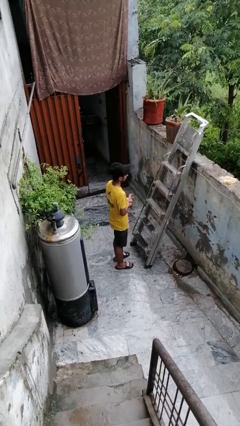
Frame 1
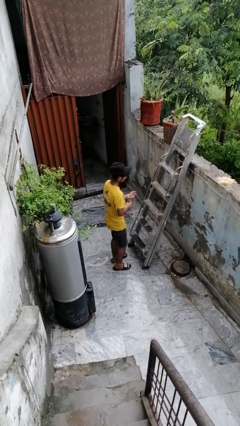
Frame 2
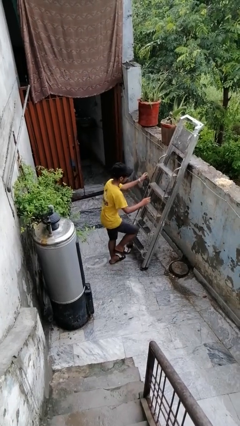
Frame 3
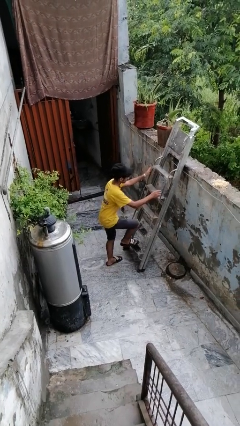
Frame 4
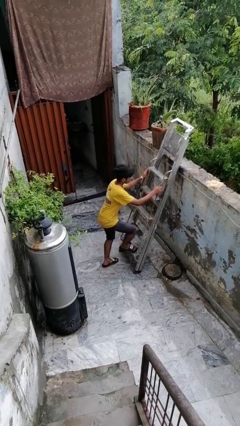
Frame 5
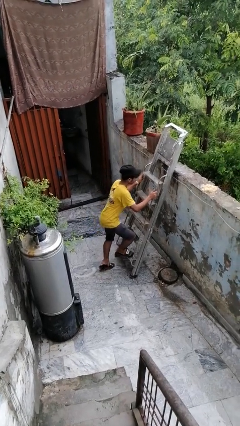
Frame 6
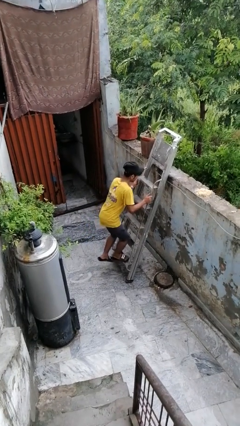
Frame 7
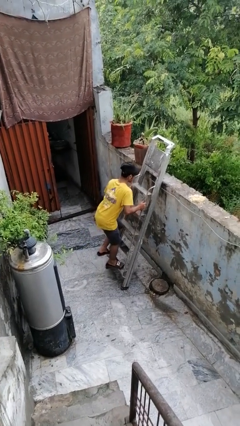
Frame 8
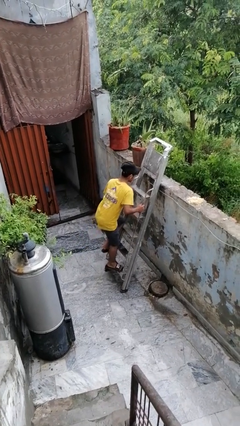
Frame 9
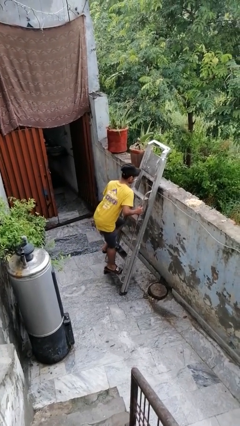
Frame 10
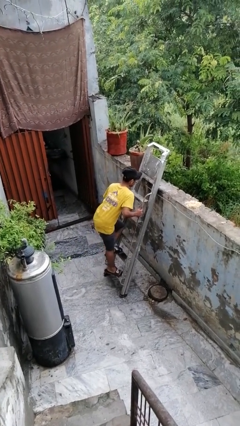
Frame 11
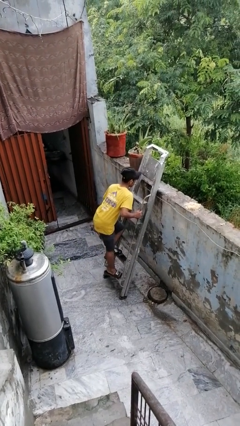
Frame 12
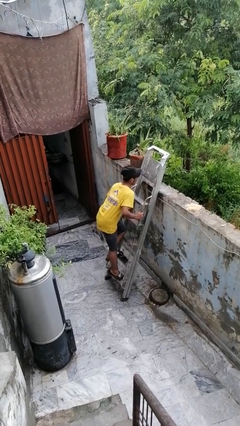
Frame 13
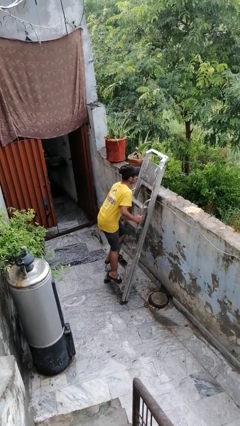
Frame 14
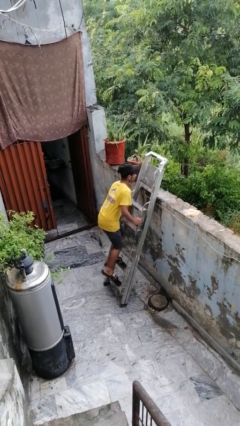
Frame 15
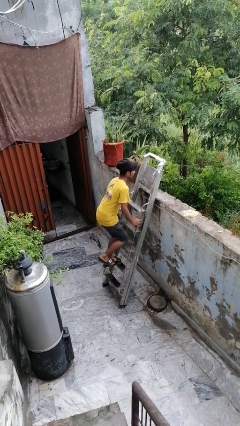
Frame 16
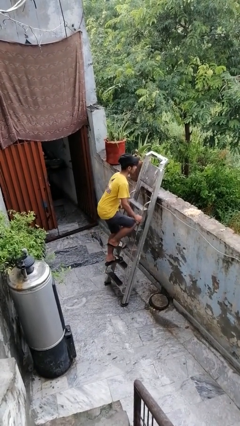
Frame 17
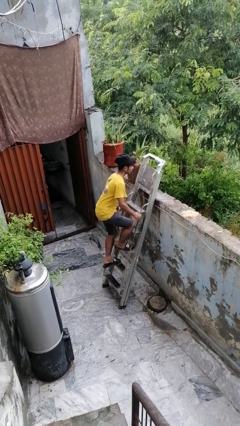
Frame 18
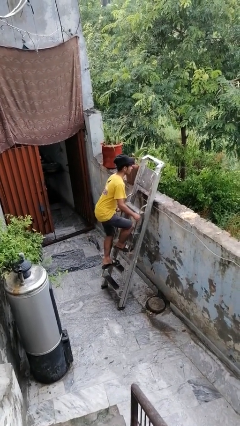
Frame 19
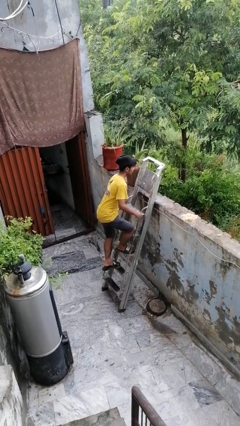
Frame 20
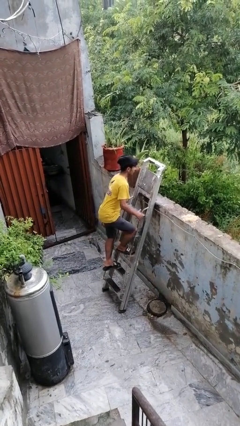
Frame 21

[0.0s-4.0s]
person climbs up ladder

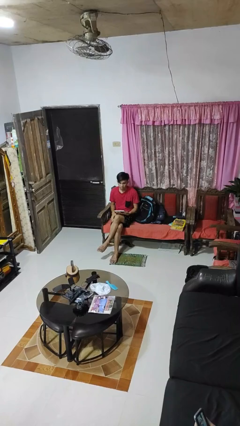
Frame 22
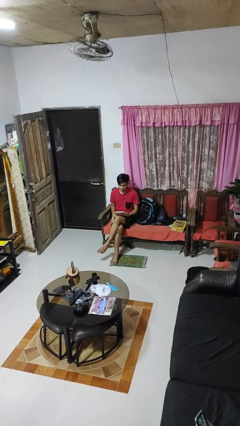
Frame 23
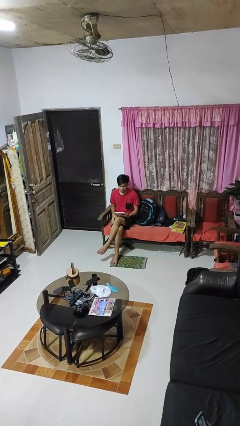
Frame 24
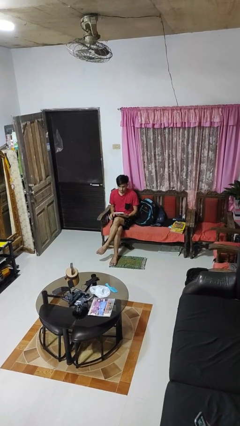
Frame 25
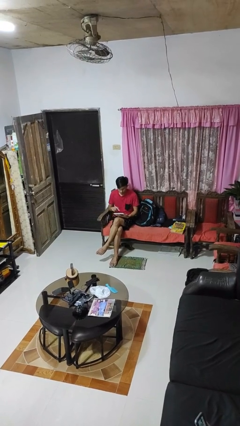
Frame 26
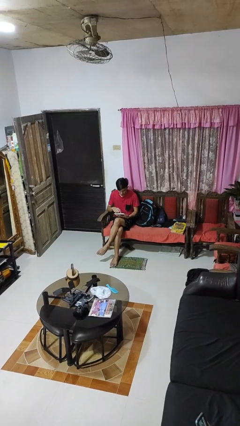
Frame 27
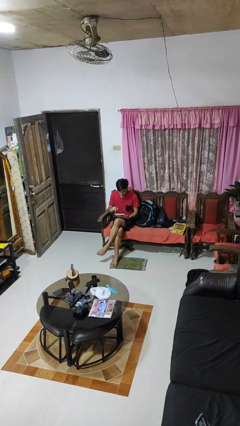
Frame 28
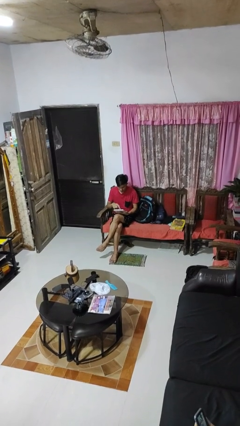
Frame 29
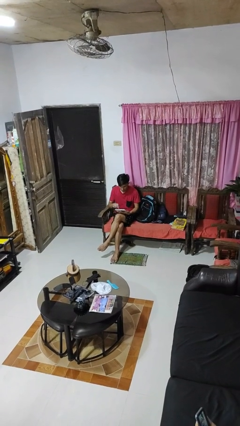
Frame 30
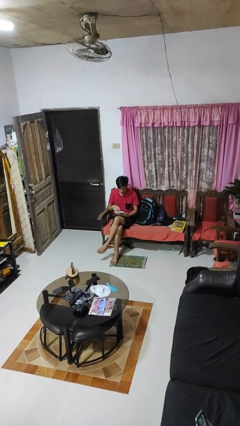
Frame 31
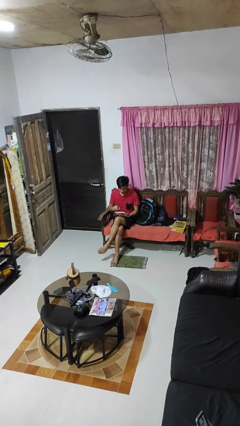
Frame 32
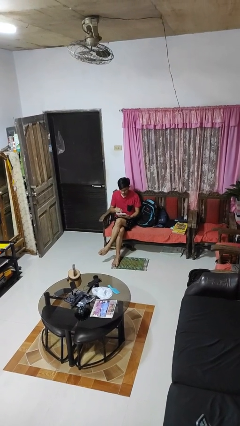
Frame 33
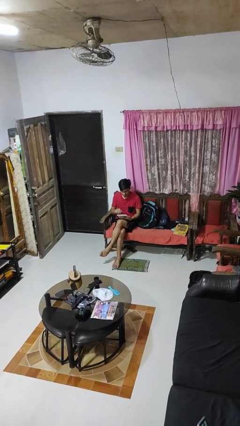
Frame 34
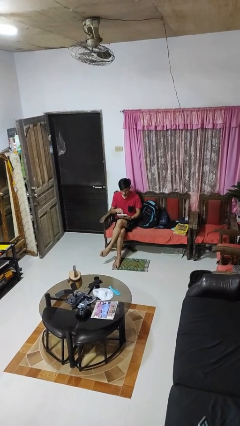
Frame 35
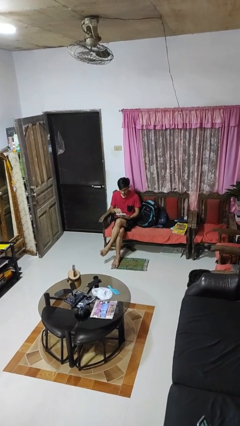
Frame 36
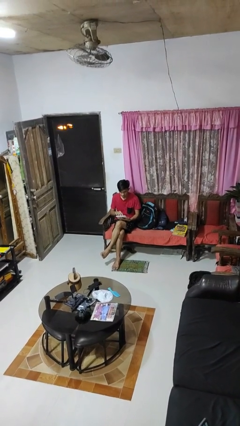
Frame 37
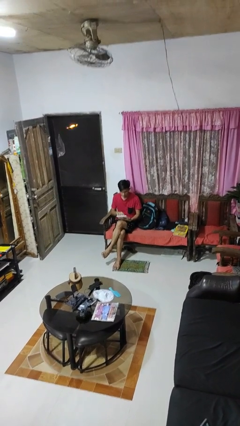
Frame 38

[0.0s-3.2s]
person interacts with tablet

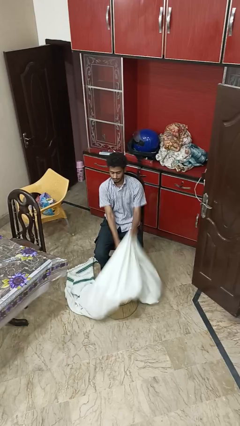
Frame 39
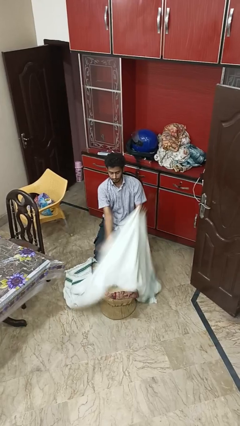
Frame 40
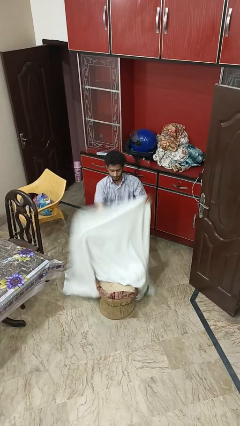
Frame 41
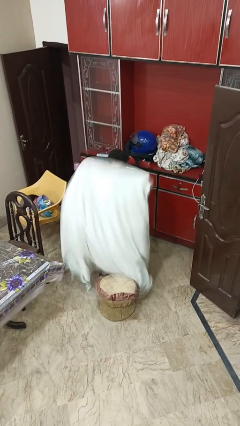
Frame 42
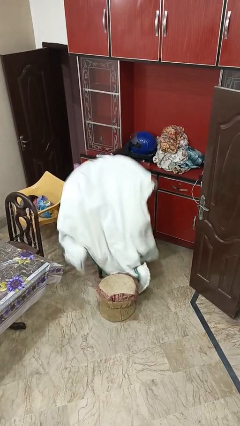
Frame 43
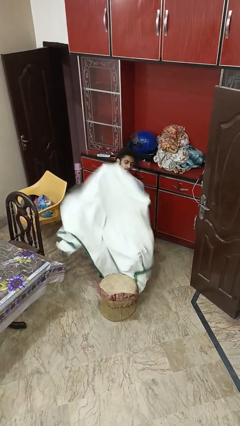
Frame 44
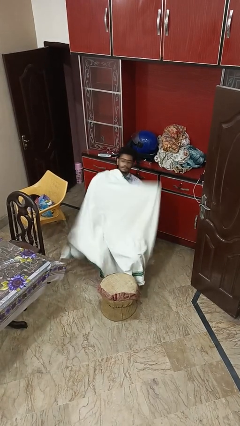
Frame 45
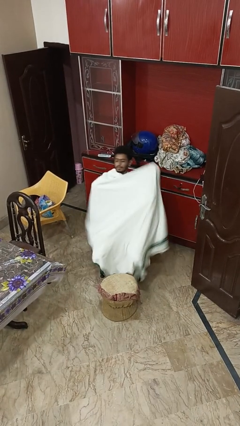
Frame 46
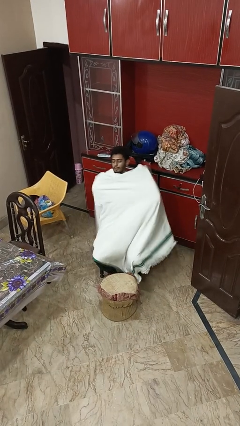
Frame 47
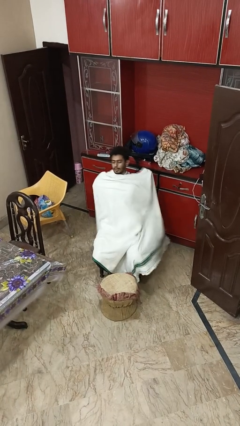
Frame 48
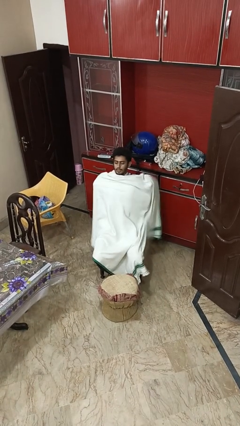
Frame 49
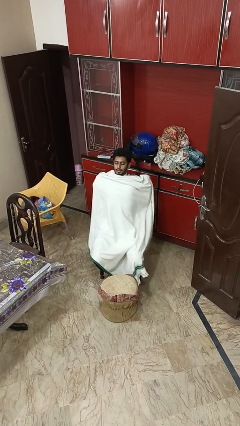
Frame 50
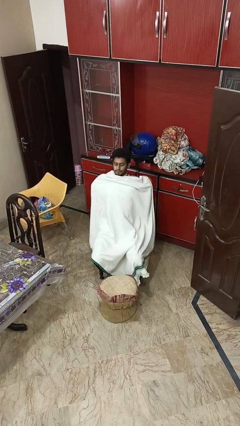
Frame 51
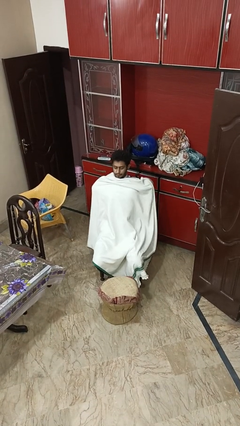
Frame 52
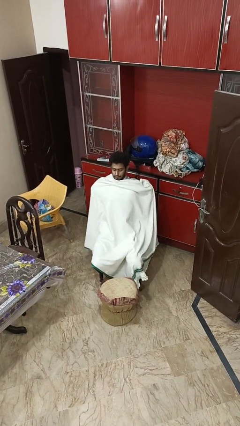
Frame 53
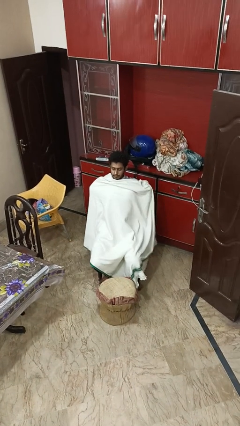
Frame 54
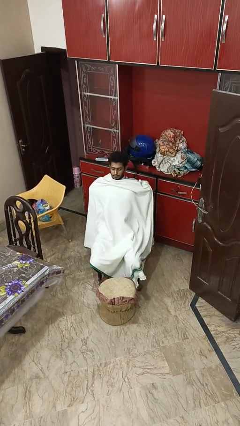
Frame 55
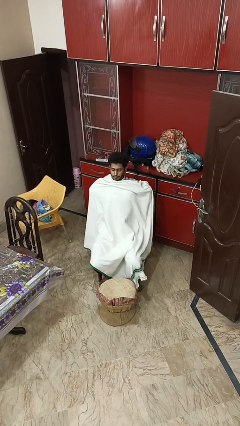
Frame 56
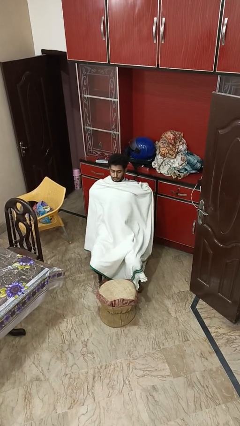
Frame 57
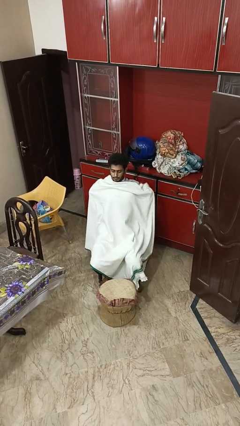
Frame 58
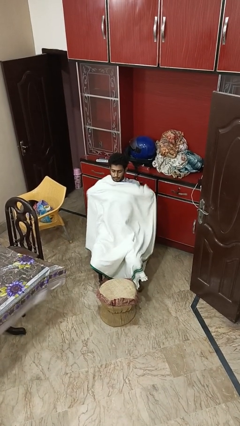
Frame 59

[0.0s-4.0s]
person covers with blanket

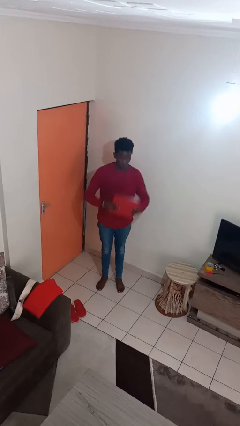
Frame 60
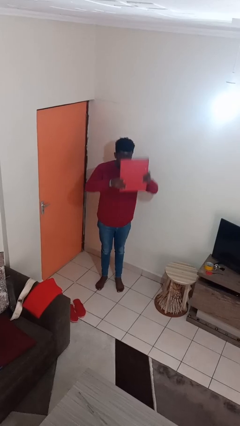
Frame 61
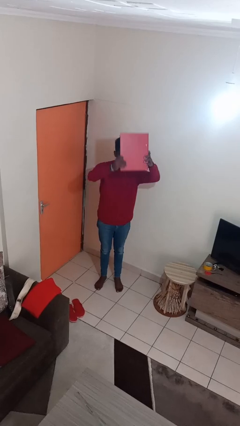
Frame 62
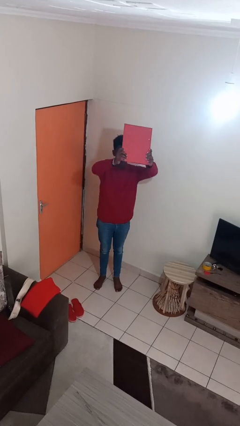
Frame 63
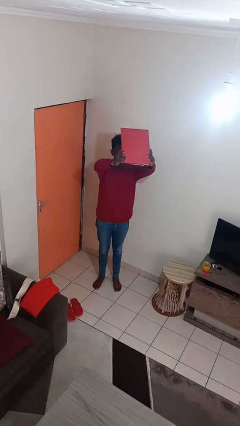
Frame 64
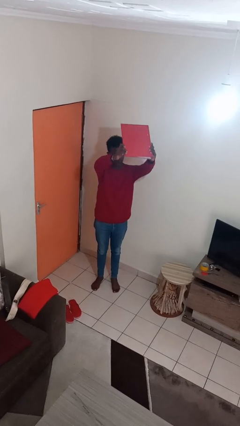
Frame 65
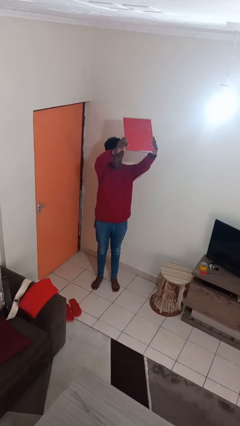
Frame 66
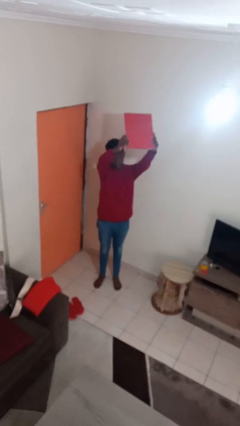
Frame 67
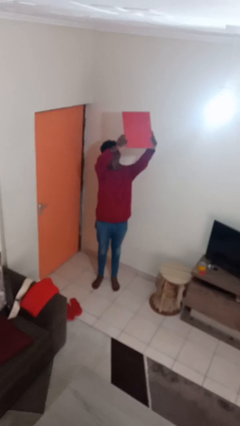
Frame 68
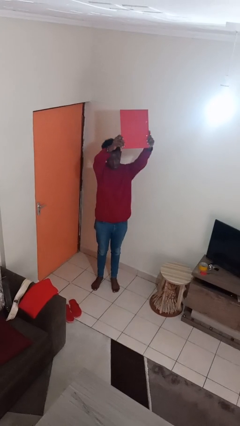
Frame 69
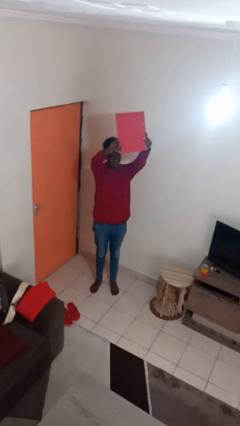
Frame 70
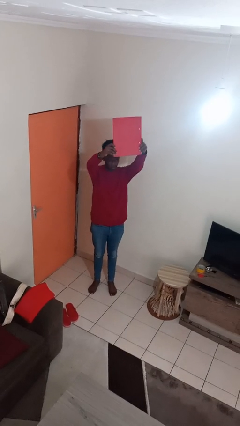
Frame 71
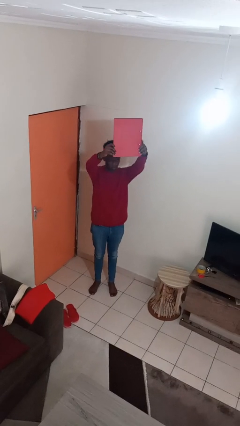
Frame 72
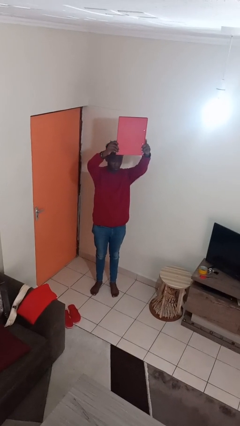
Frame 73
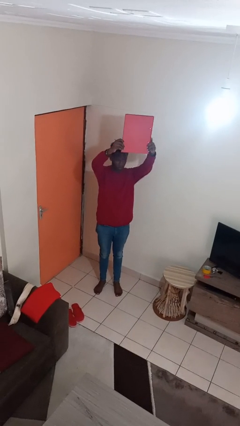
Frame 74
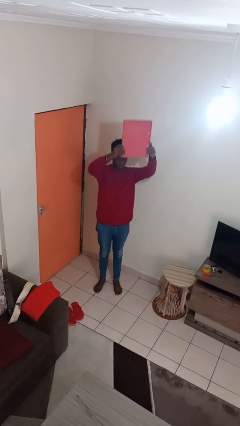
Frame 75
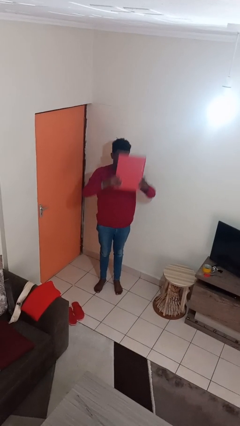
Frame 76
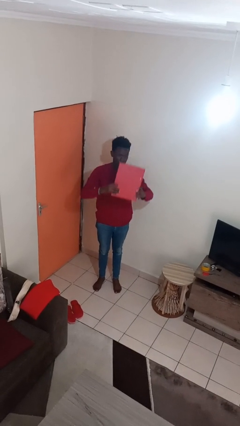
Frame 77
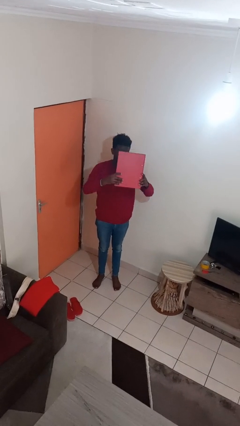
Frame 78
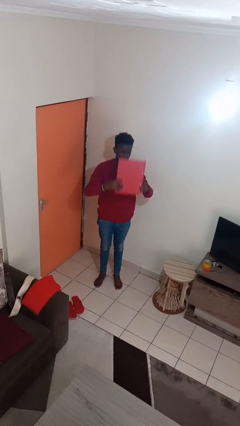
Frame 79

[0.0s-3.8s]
person holds object above head

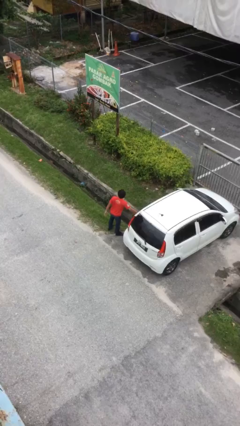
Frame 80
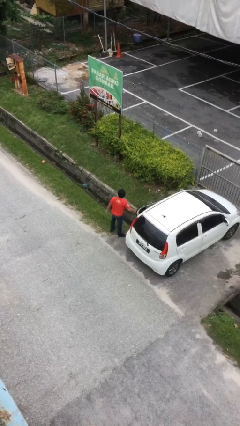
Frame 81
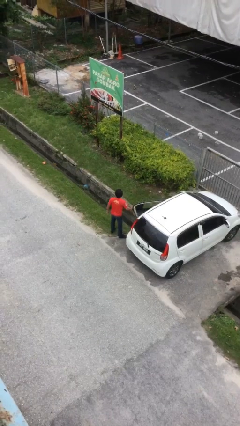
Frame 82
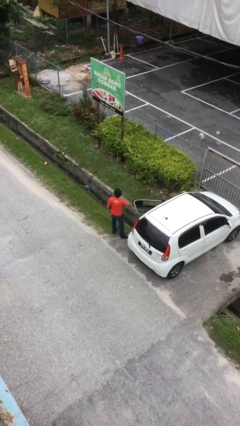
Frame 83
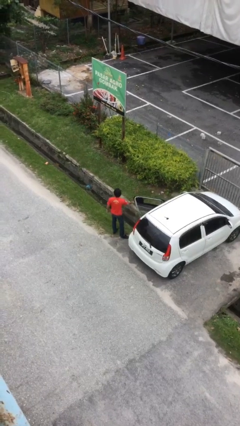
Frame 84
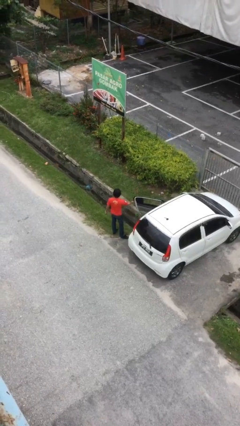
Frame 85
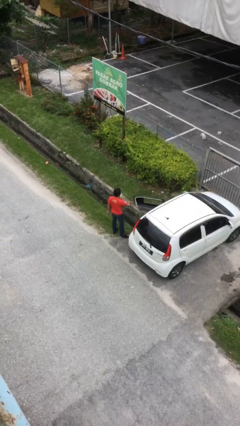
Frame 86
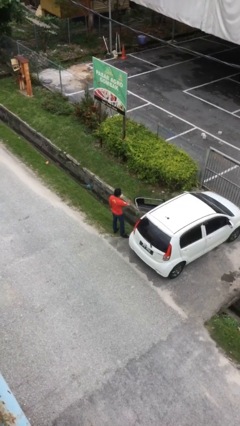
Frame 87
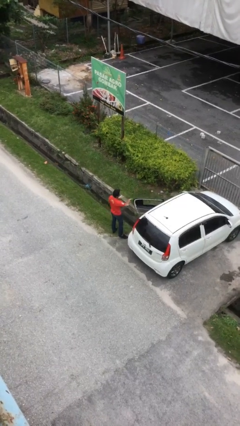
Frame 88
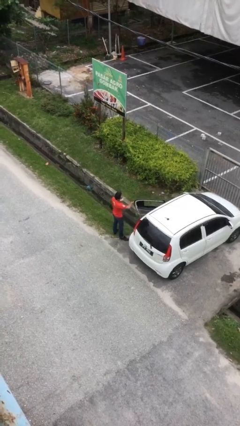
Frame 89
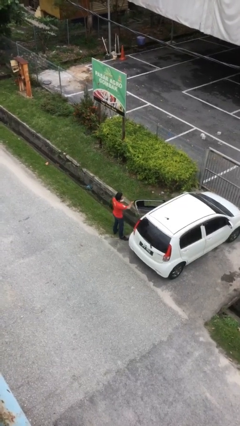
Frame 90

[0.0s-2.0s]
person opens car door
